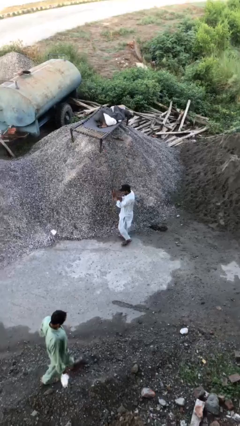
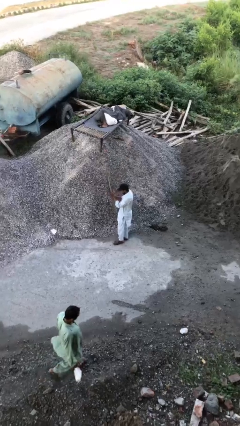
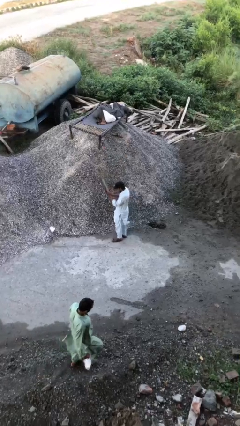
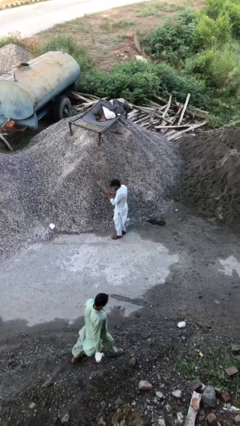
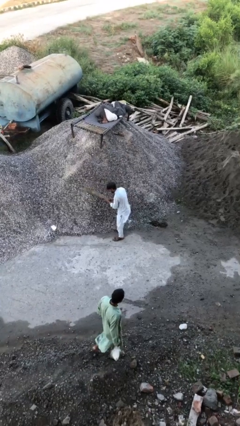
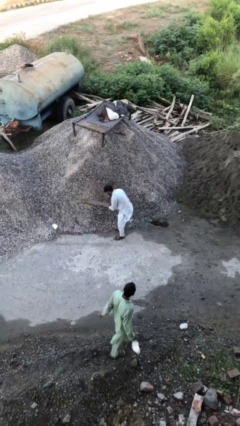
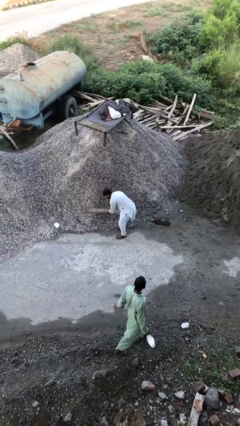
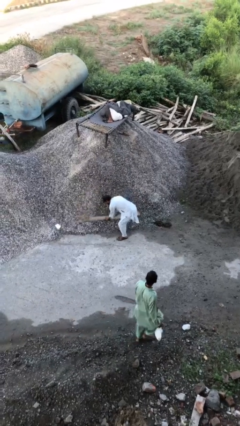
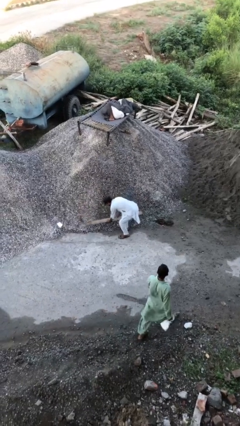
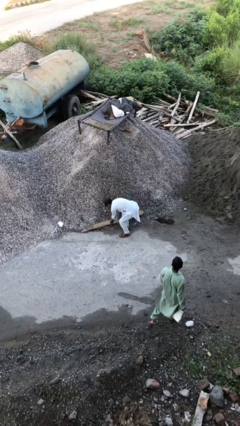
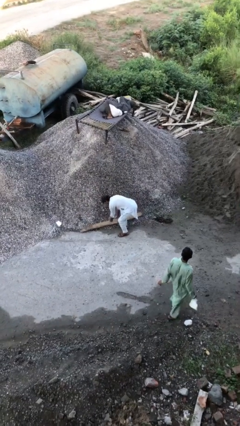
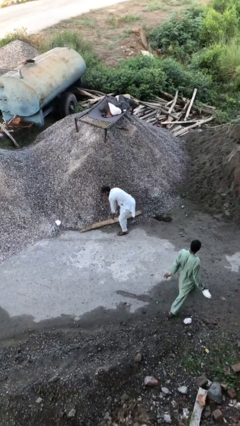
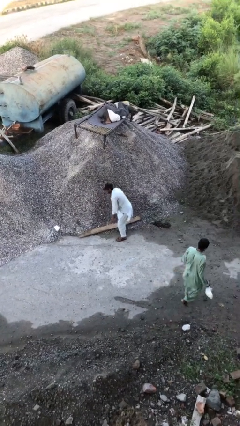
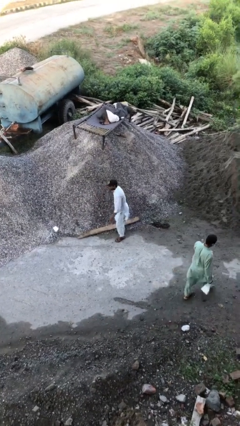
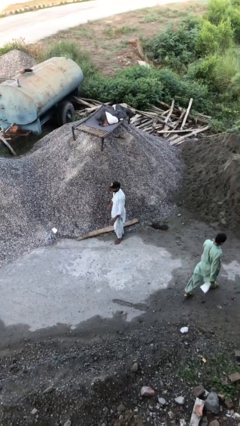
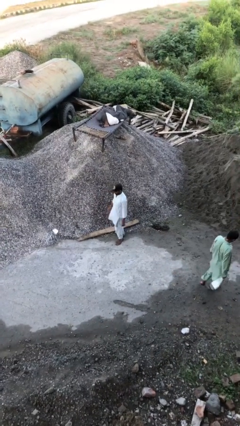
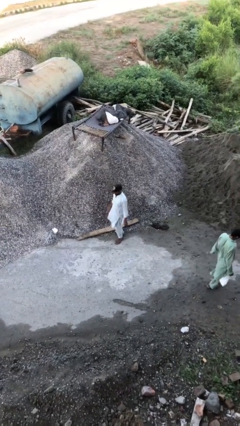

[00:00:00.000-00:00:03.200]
person puts down object on floor

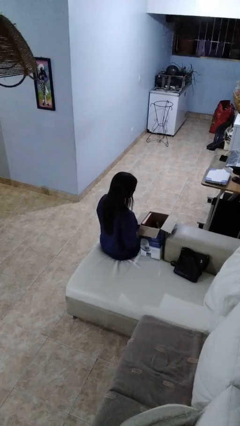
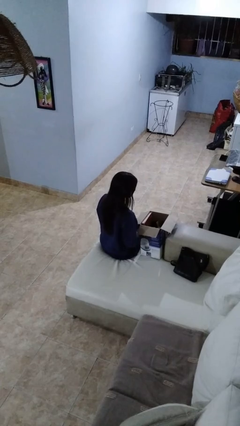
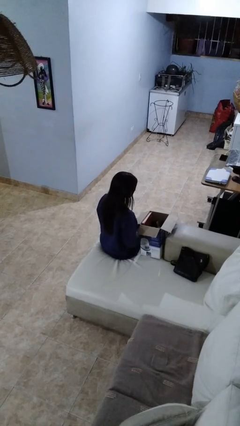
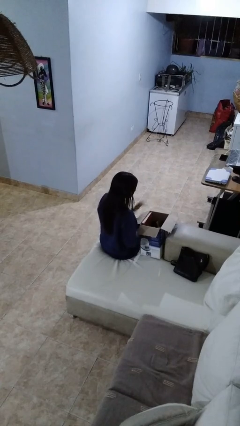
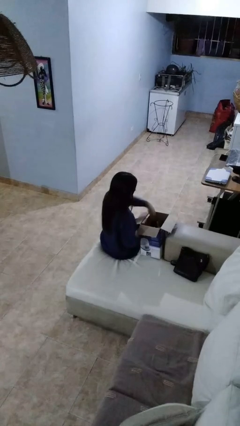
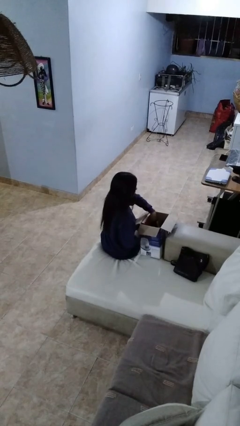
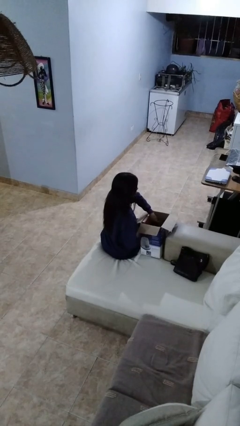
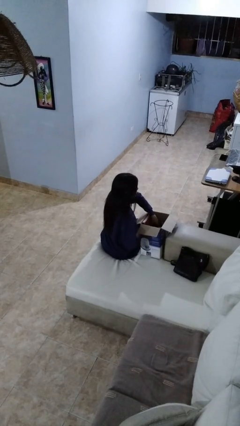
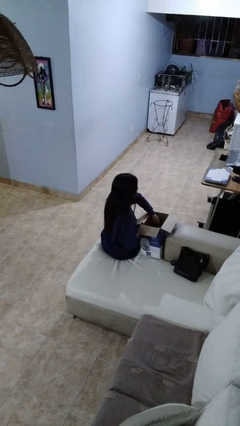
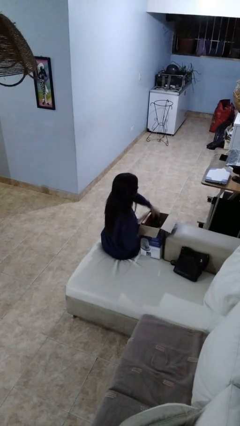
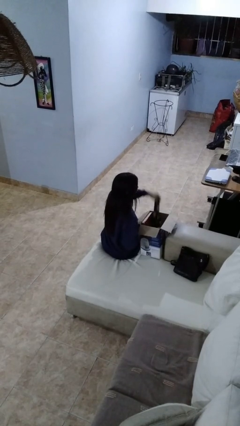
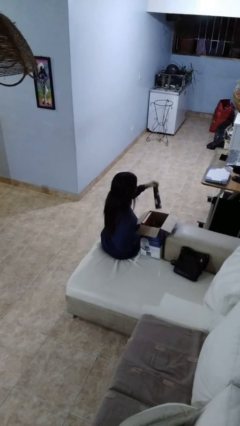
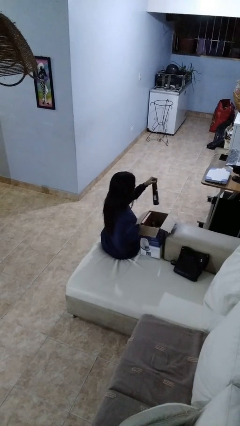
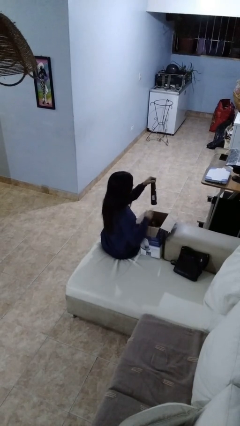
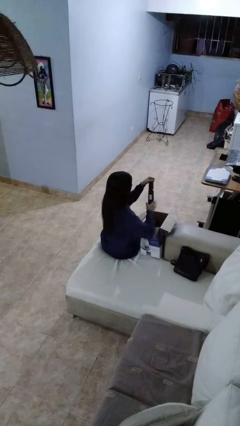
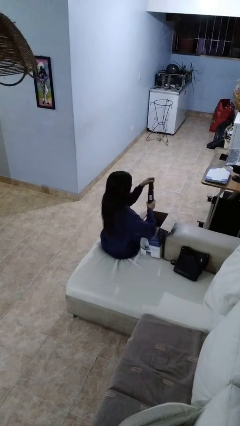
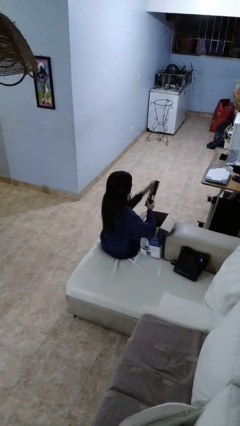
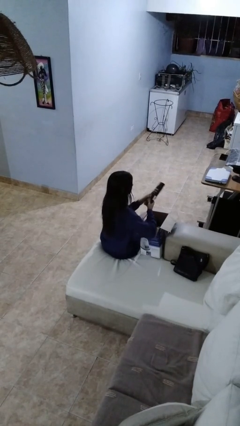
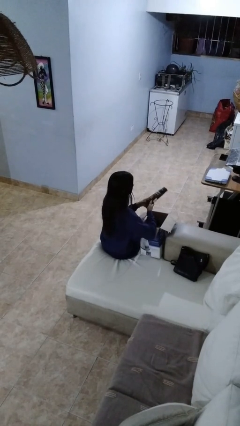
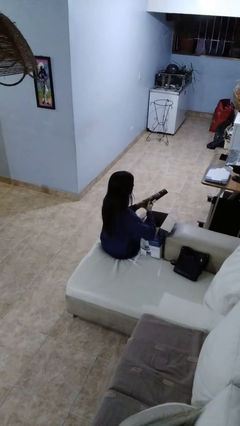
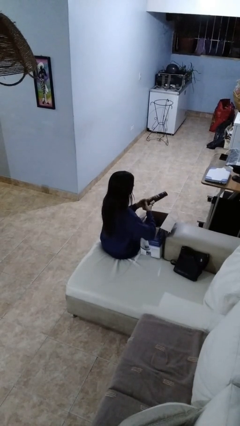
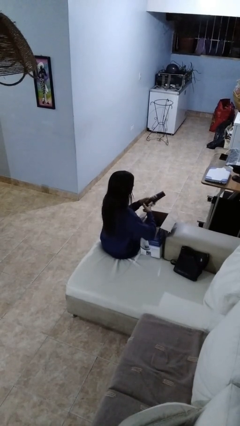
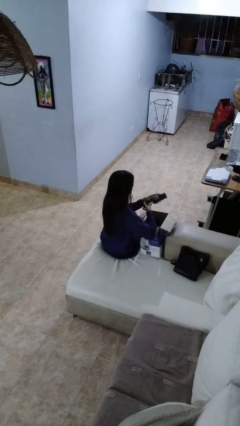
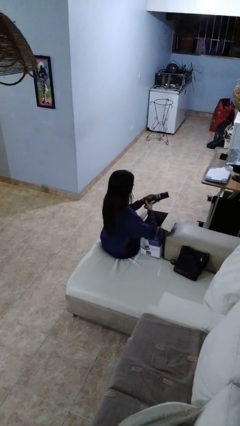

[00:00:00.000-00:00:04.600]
person takes object from box

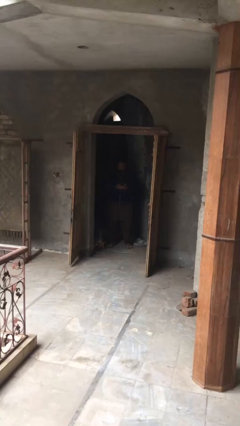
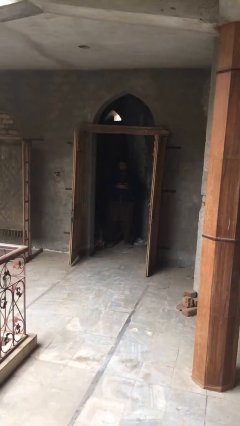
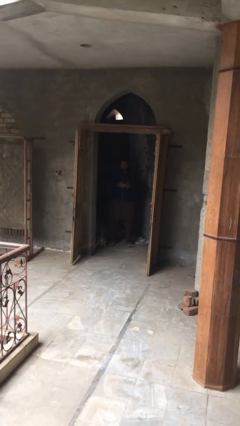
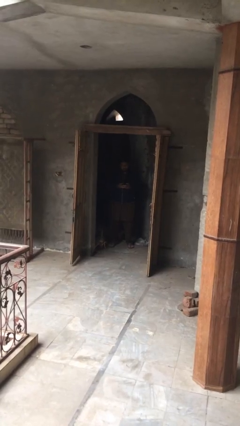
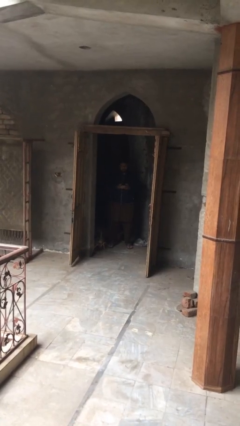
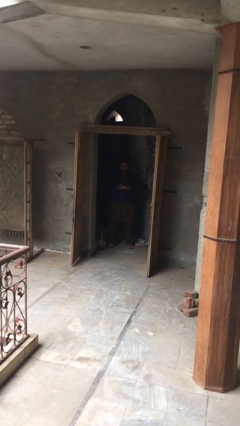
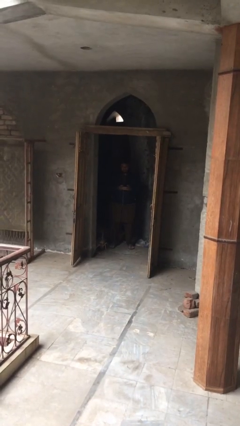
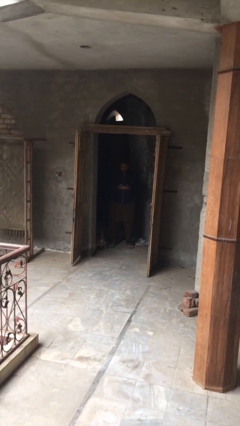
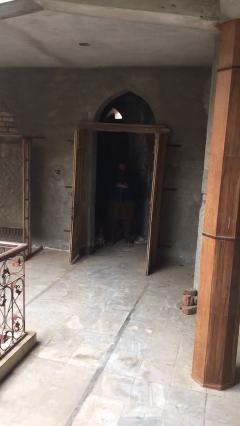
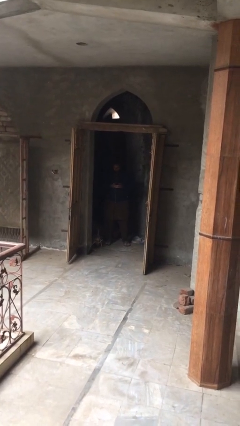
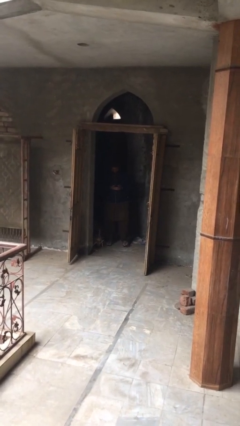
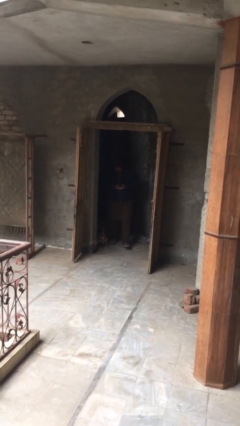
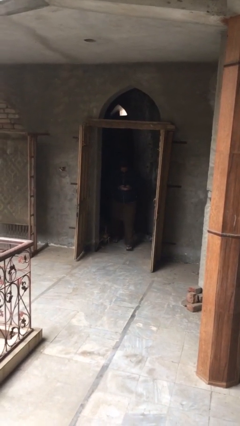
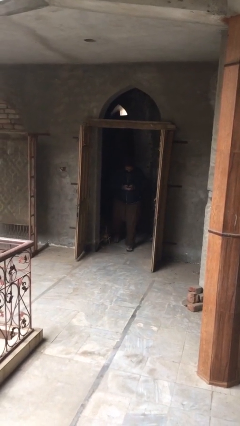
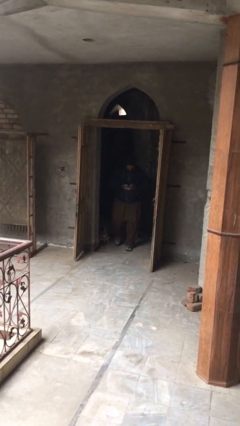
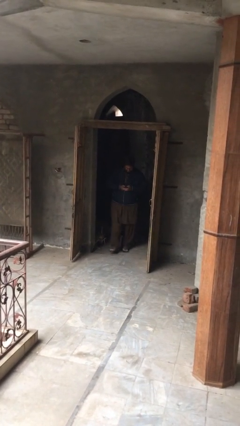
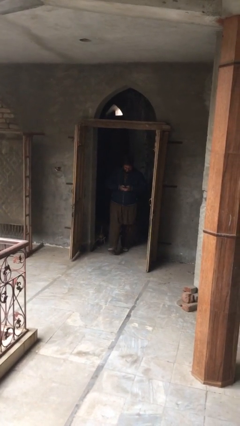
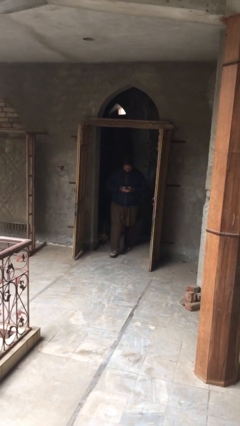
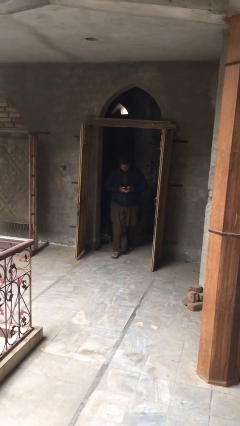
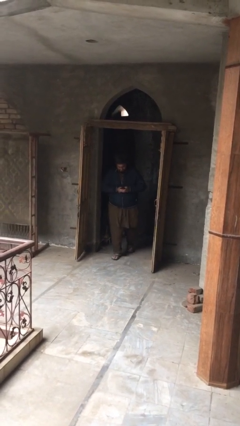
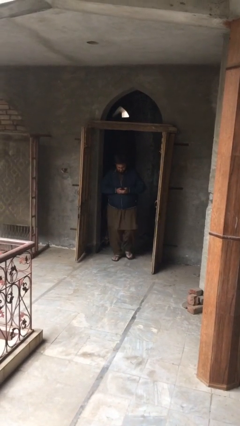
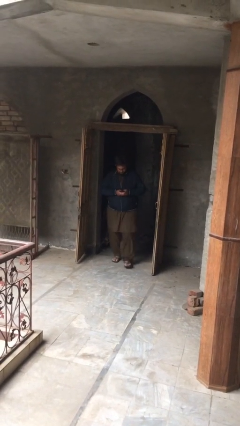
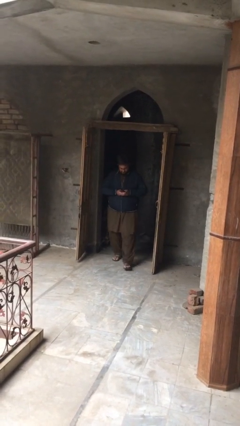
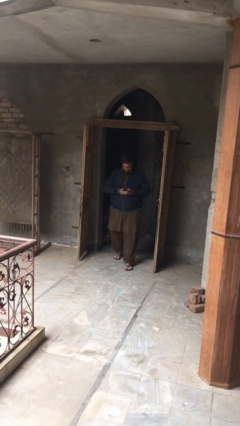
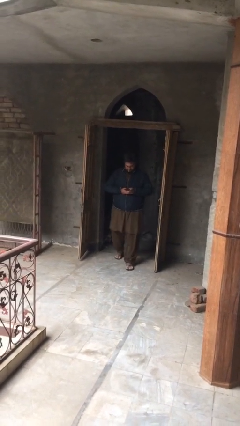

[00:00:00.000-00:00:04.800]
person enters scene through structure

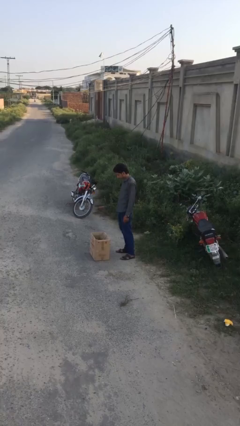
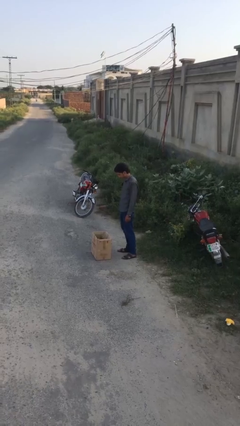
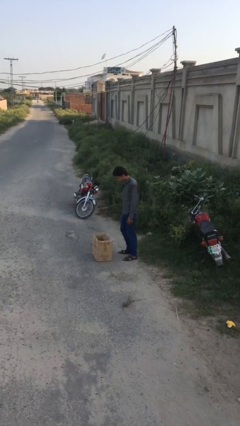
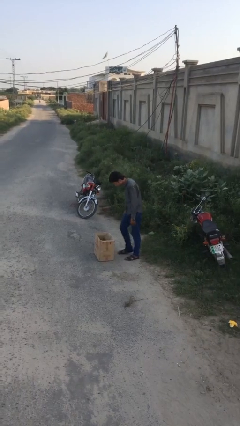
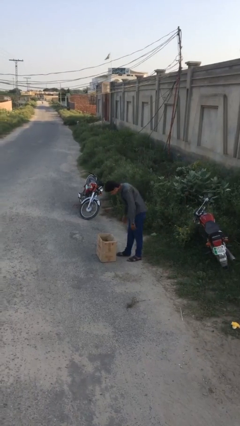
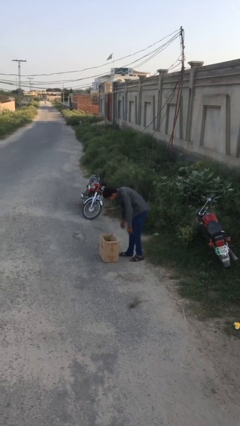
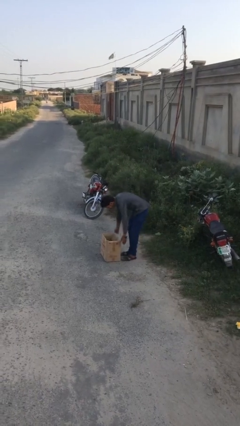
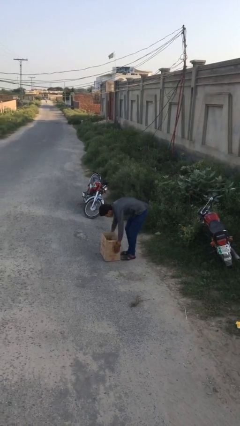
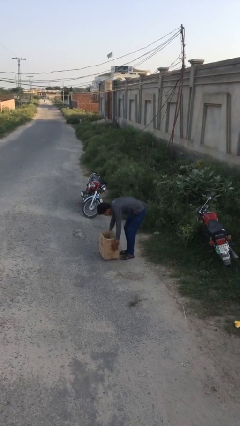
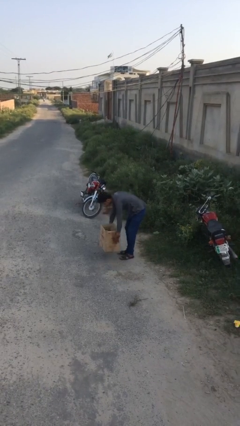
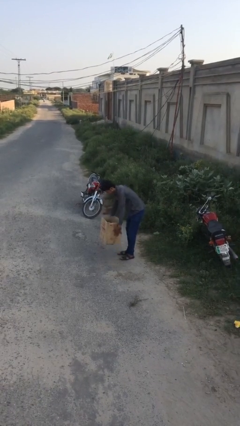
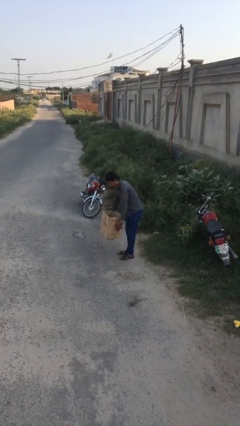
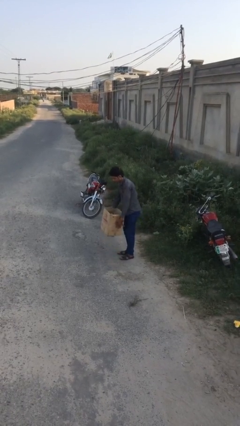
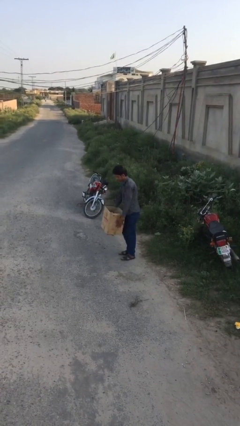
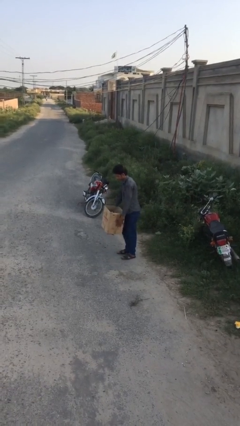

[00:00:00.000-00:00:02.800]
person picks up object from floor

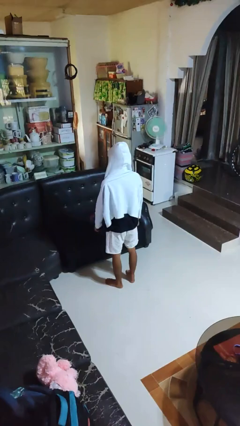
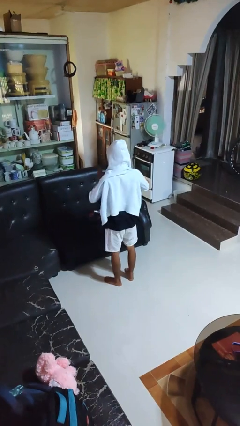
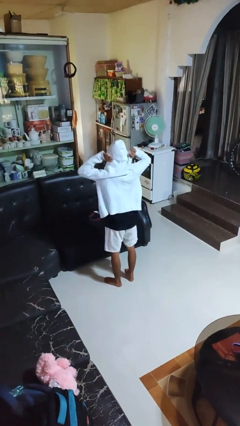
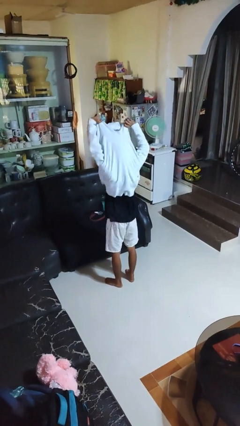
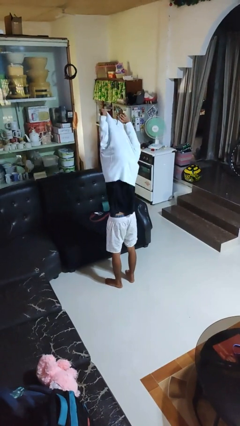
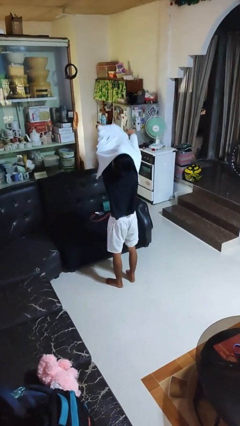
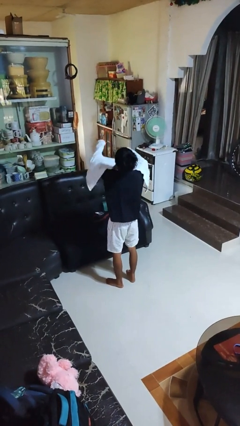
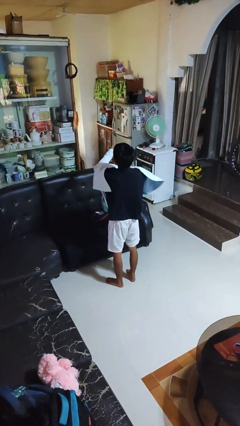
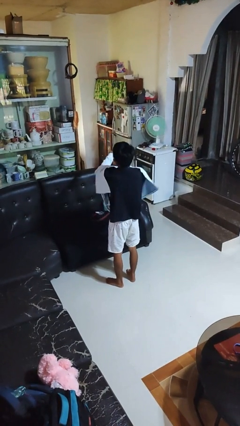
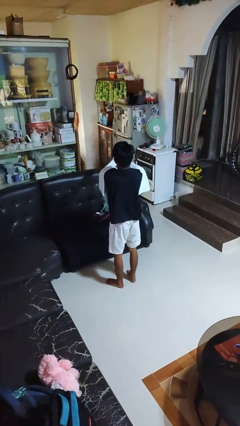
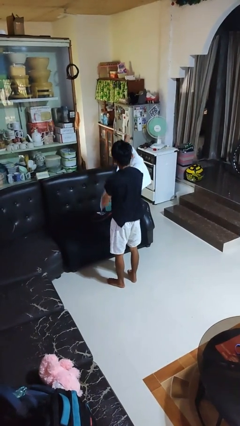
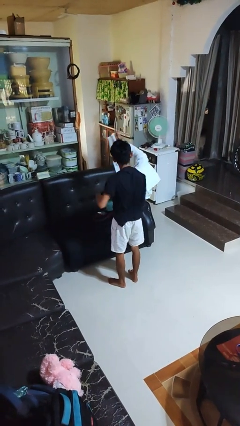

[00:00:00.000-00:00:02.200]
person takes off hoodie

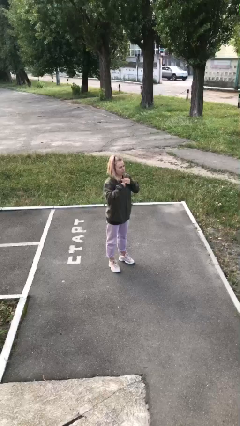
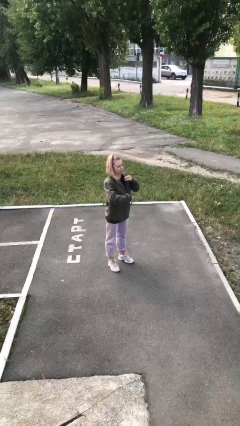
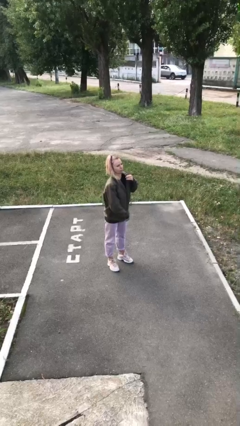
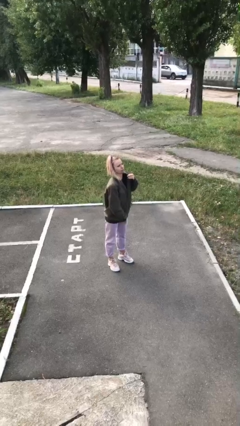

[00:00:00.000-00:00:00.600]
person unzips jacket
